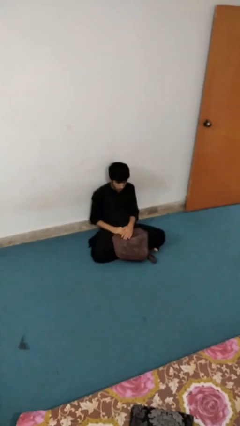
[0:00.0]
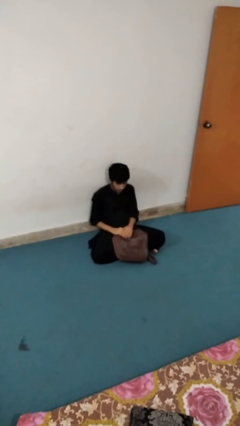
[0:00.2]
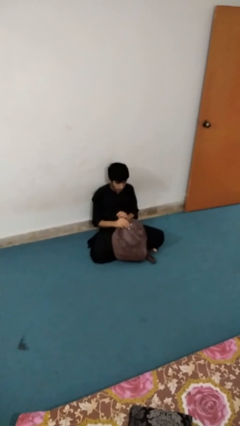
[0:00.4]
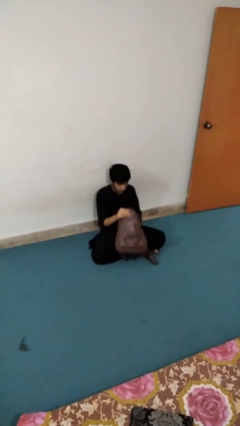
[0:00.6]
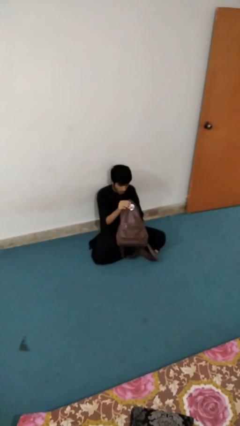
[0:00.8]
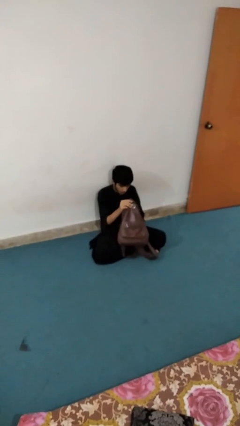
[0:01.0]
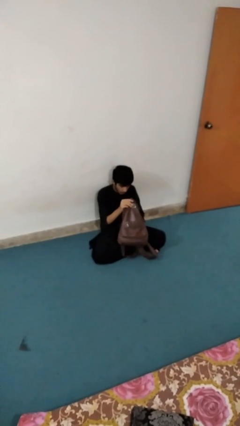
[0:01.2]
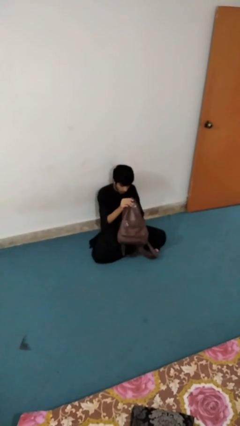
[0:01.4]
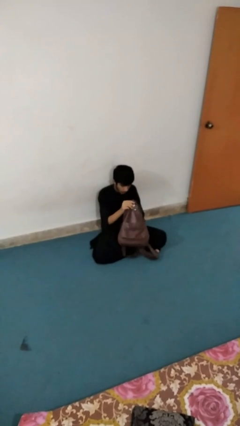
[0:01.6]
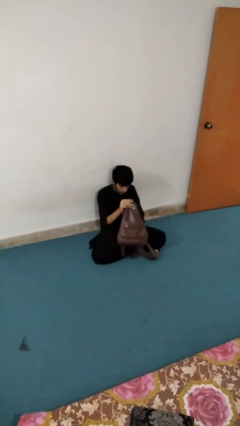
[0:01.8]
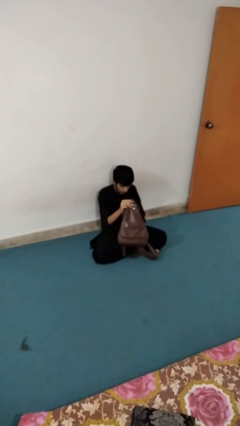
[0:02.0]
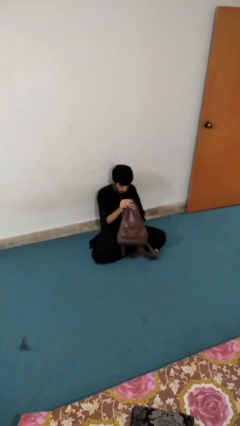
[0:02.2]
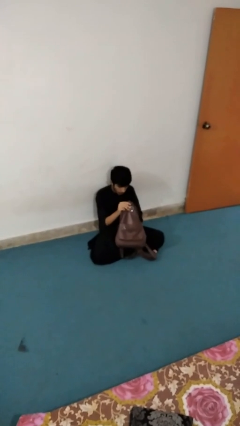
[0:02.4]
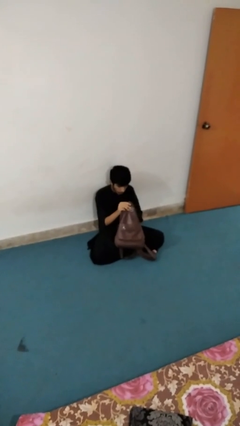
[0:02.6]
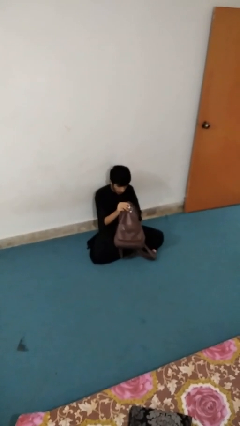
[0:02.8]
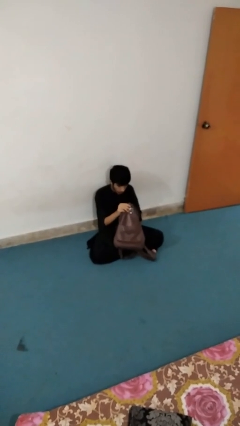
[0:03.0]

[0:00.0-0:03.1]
person searches in bag

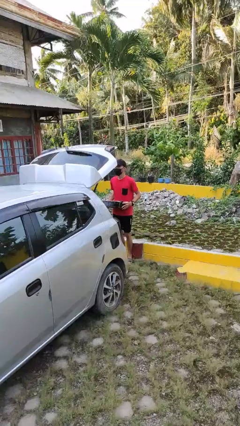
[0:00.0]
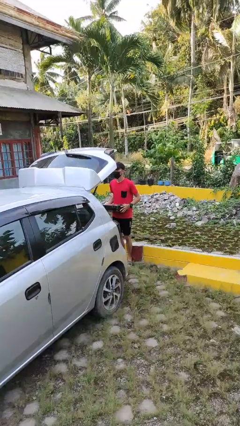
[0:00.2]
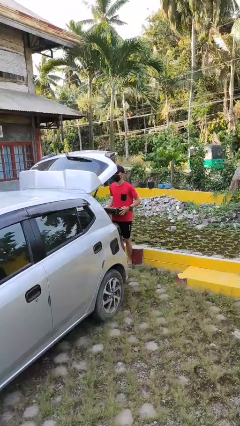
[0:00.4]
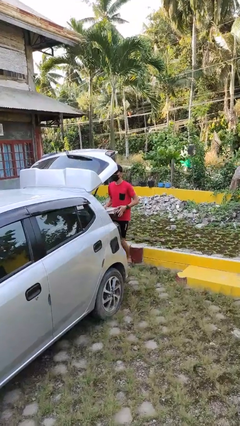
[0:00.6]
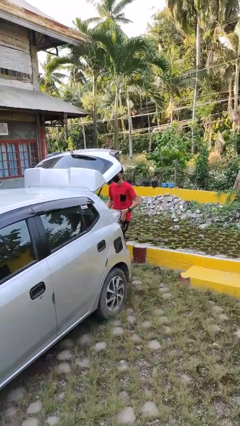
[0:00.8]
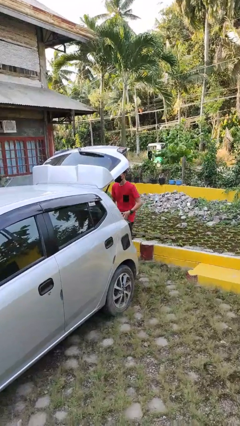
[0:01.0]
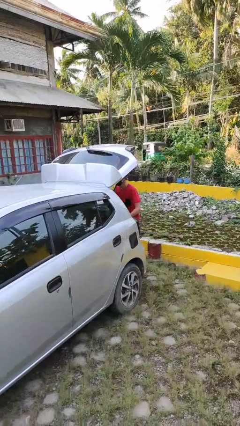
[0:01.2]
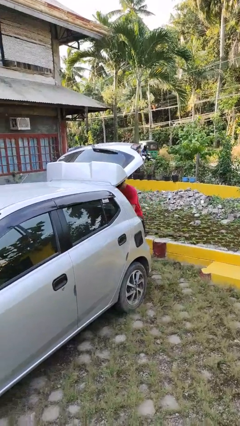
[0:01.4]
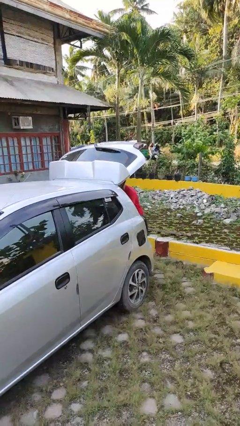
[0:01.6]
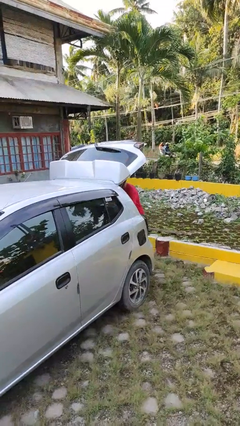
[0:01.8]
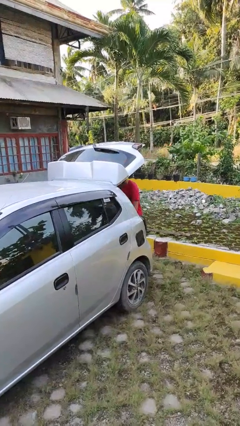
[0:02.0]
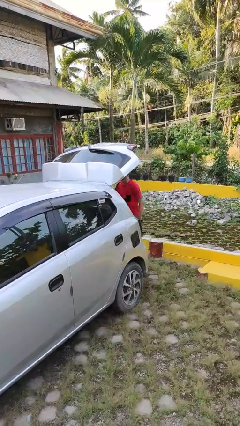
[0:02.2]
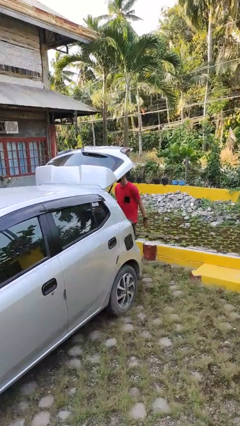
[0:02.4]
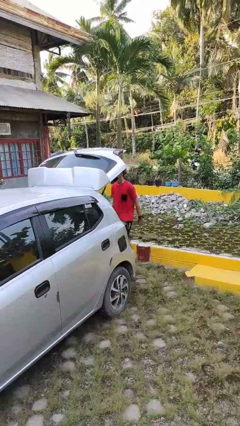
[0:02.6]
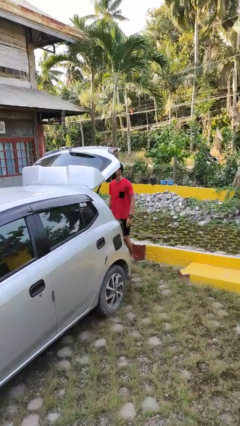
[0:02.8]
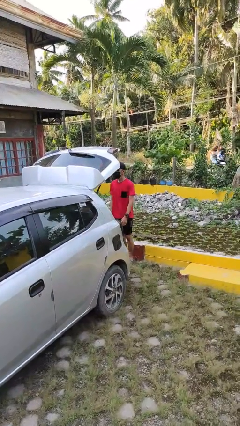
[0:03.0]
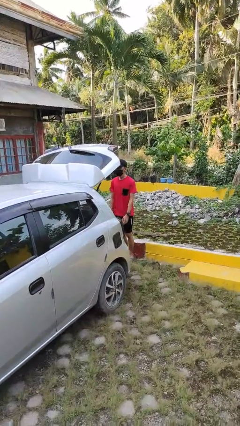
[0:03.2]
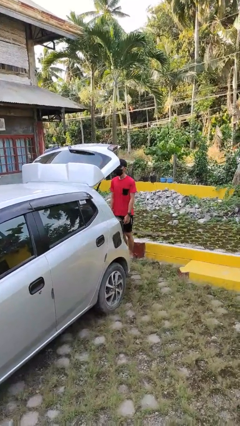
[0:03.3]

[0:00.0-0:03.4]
person loads car

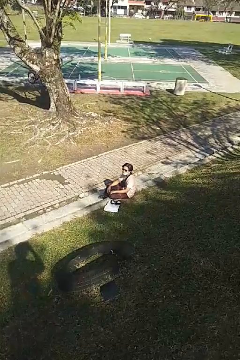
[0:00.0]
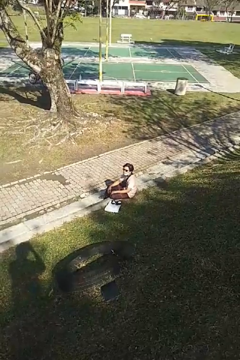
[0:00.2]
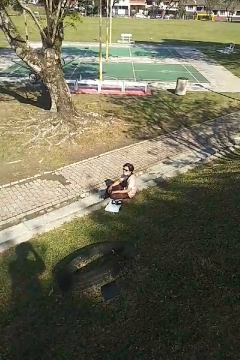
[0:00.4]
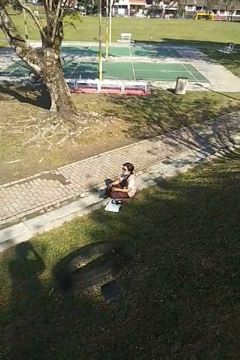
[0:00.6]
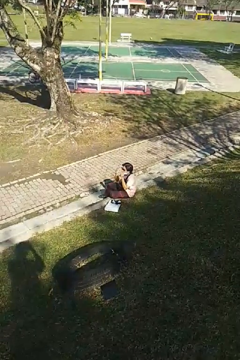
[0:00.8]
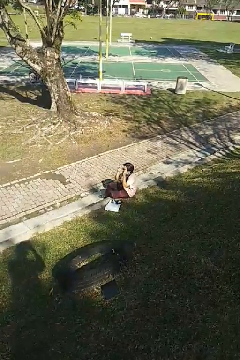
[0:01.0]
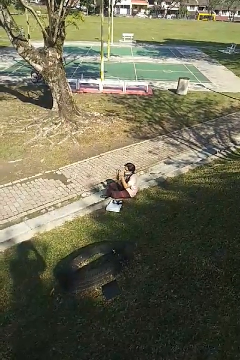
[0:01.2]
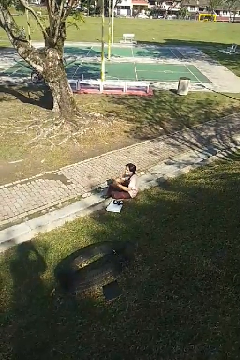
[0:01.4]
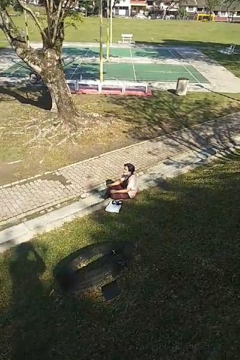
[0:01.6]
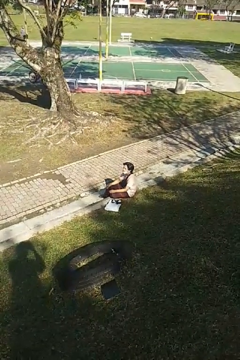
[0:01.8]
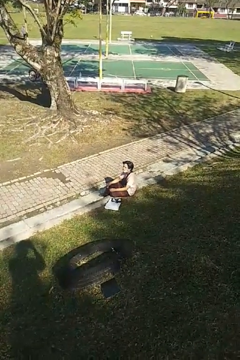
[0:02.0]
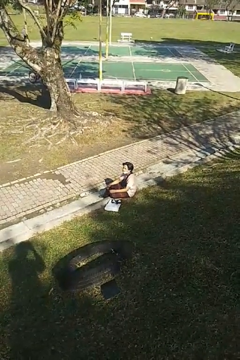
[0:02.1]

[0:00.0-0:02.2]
person takes off sunglasses

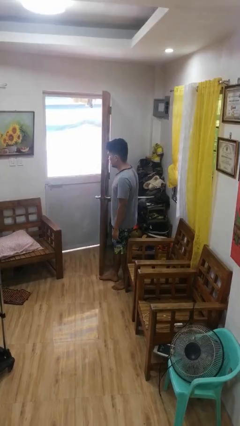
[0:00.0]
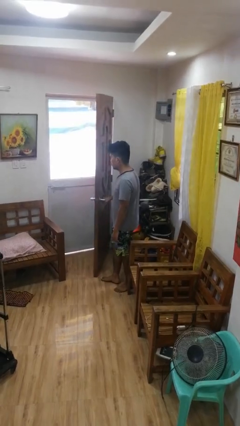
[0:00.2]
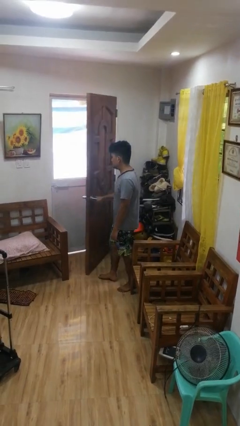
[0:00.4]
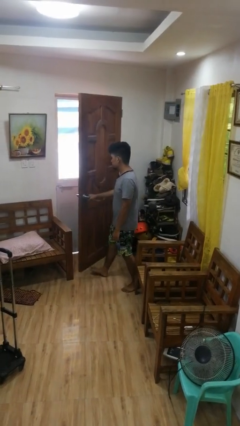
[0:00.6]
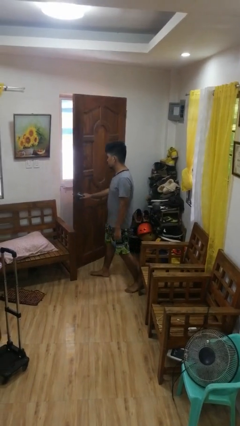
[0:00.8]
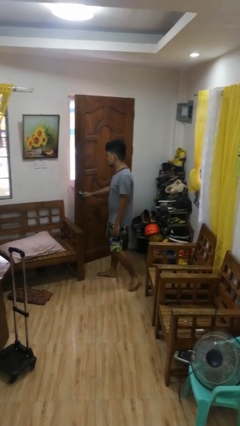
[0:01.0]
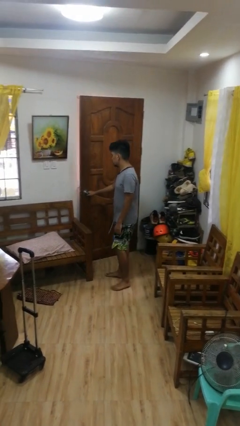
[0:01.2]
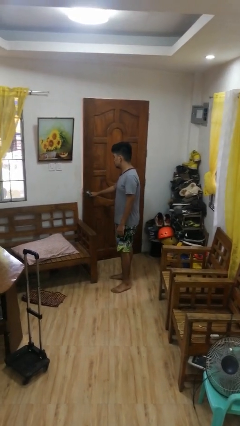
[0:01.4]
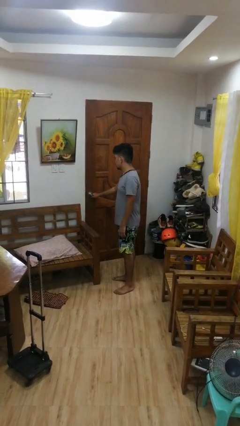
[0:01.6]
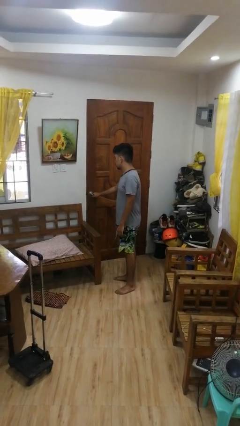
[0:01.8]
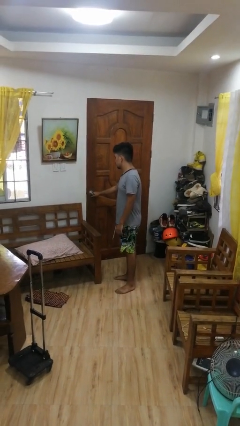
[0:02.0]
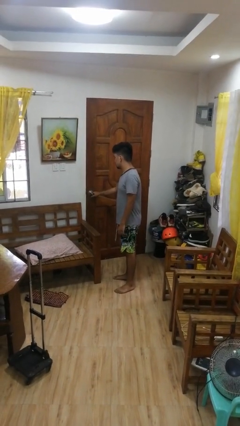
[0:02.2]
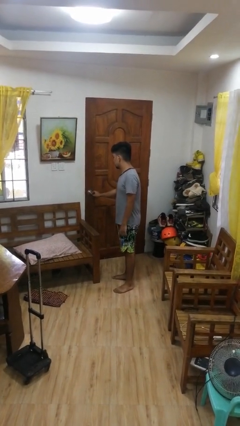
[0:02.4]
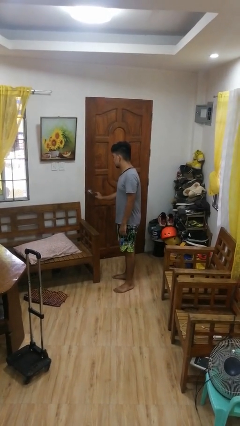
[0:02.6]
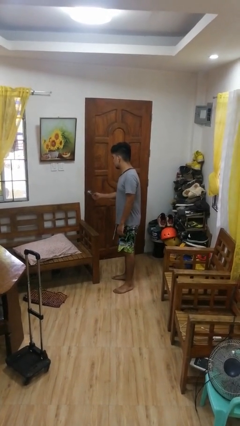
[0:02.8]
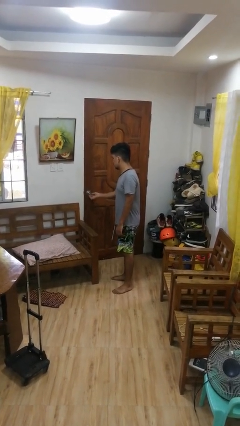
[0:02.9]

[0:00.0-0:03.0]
person closes facility door

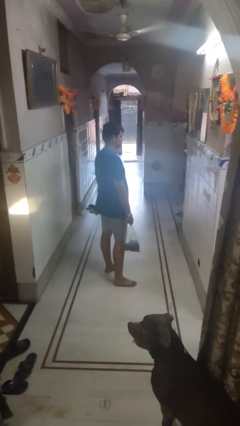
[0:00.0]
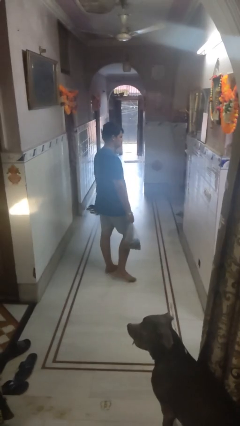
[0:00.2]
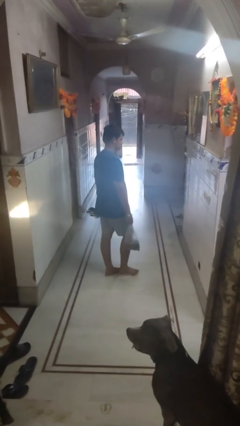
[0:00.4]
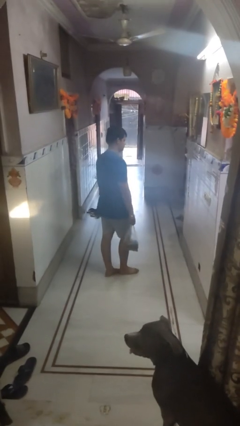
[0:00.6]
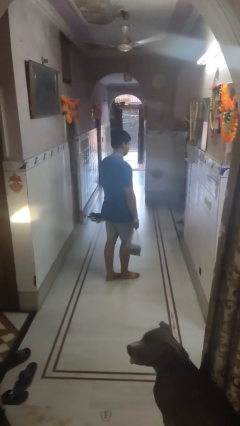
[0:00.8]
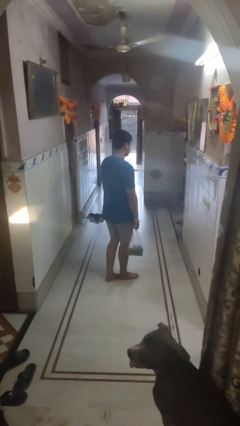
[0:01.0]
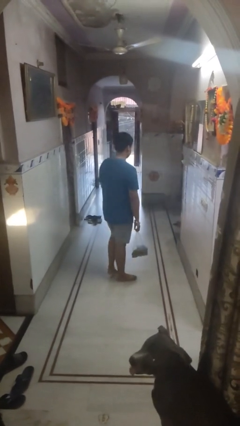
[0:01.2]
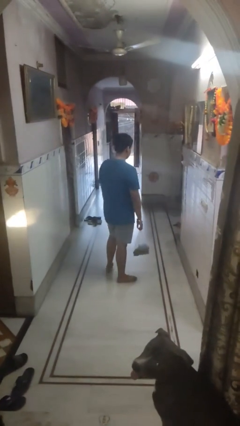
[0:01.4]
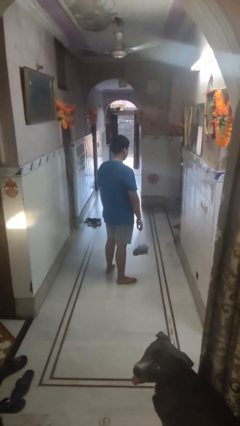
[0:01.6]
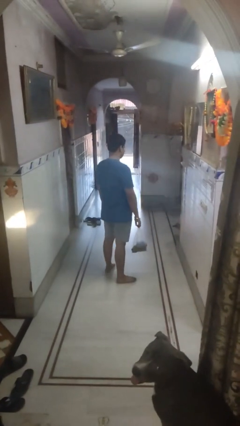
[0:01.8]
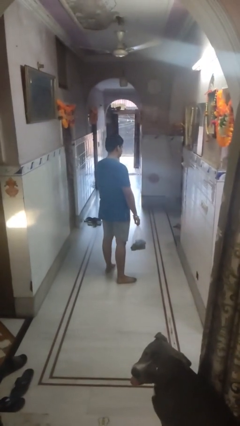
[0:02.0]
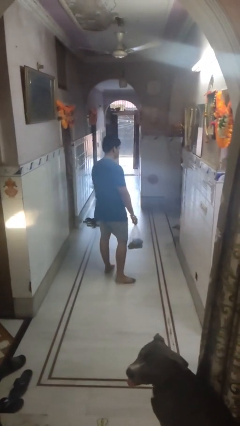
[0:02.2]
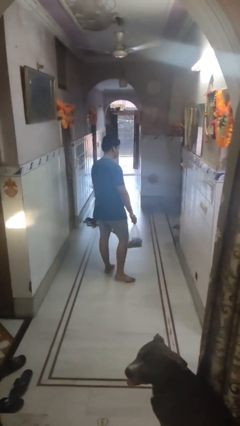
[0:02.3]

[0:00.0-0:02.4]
person carries groceries

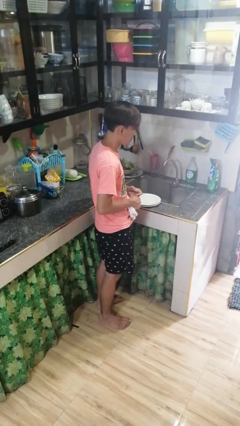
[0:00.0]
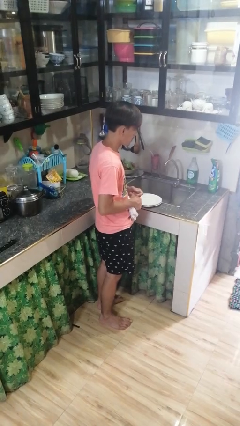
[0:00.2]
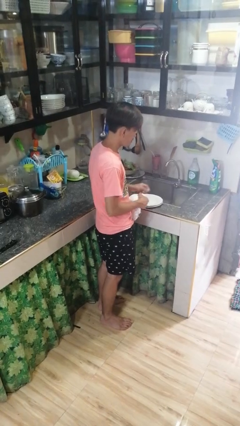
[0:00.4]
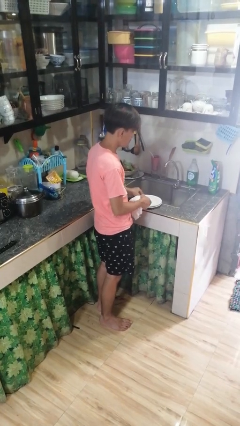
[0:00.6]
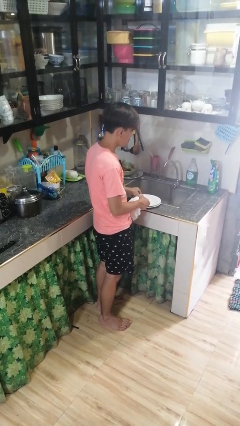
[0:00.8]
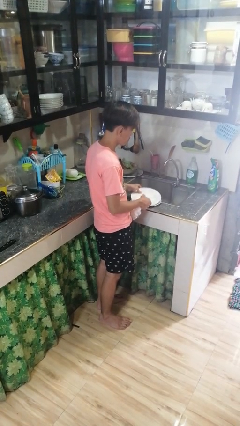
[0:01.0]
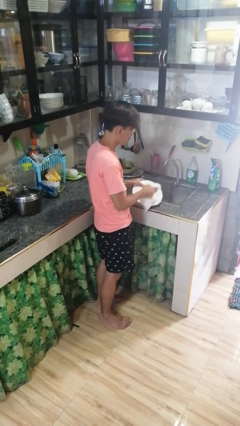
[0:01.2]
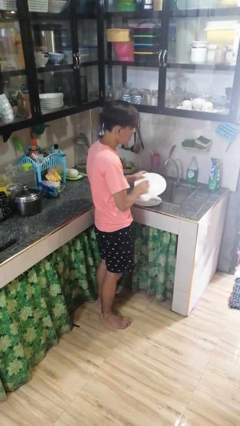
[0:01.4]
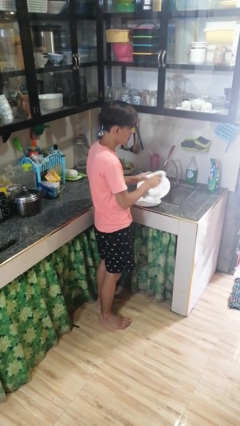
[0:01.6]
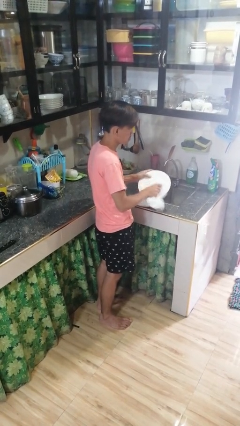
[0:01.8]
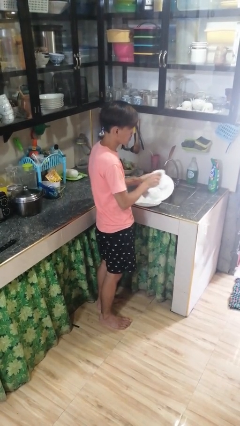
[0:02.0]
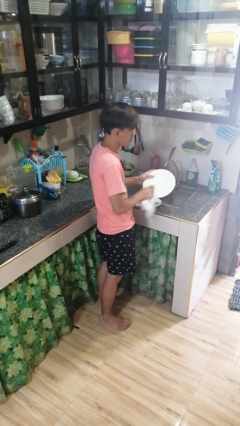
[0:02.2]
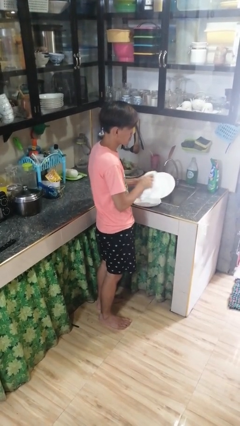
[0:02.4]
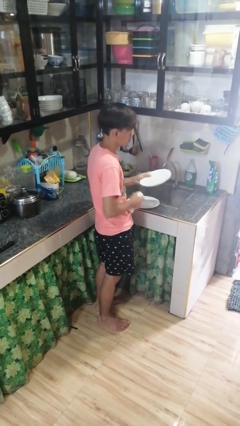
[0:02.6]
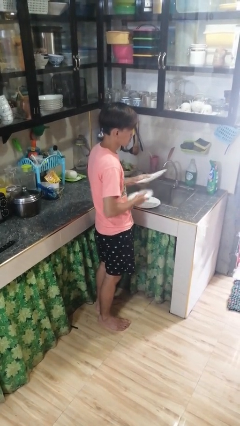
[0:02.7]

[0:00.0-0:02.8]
person dries dish

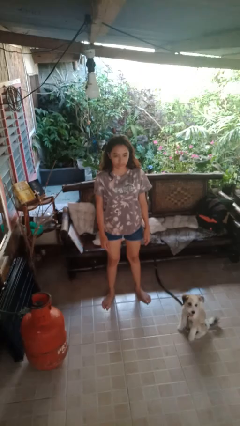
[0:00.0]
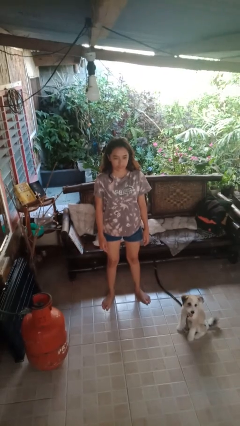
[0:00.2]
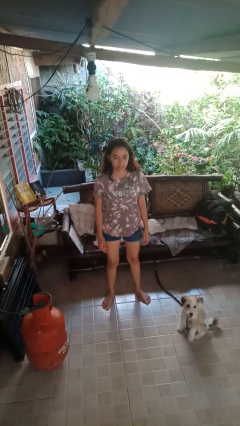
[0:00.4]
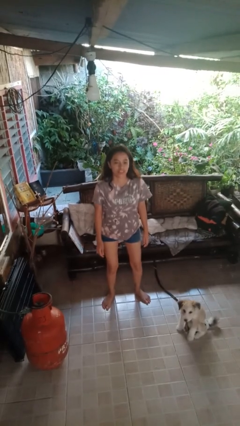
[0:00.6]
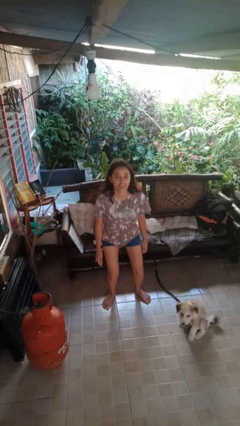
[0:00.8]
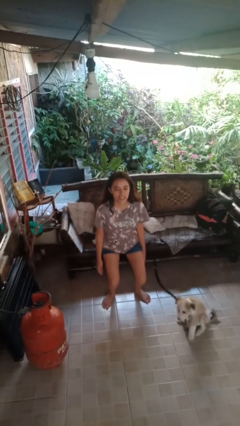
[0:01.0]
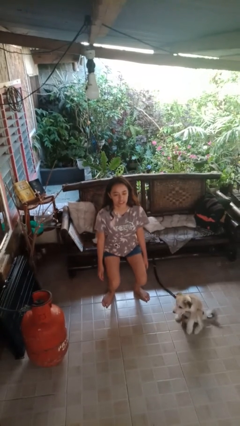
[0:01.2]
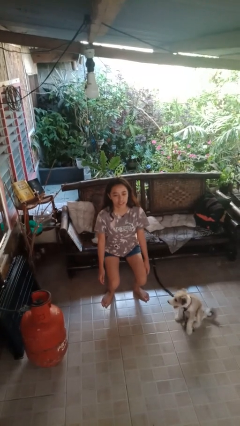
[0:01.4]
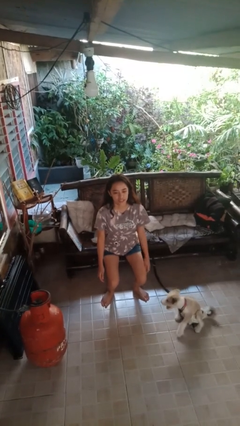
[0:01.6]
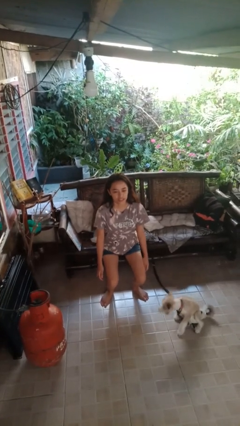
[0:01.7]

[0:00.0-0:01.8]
person squats
